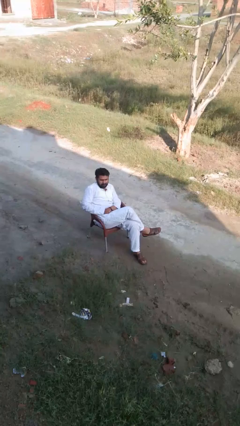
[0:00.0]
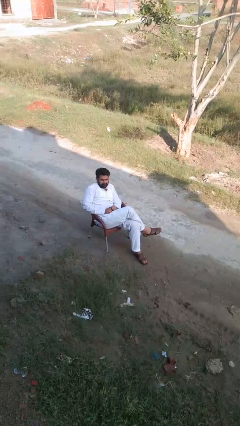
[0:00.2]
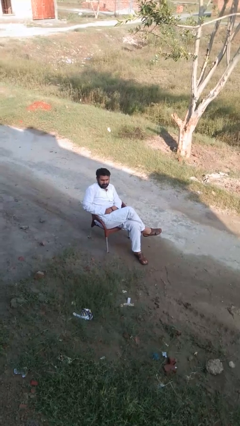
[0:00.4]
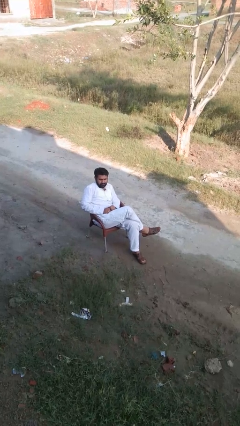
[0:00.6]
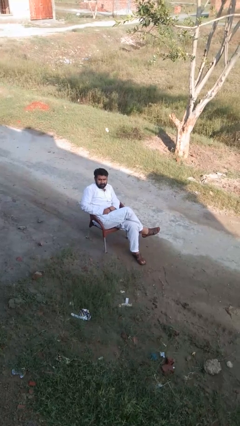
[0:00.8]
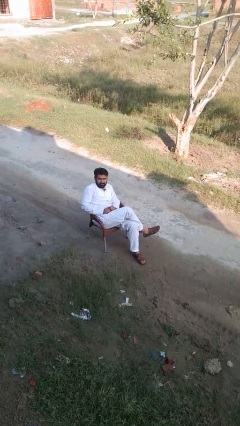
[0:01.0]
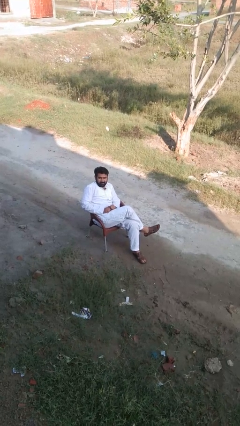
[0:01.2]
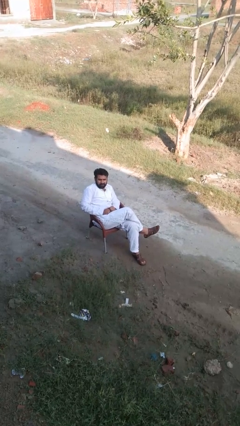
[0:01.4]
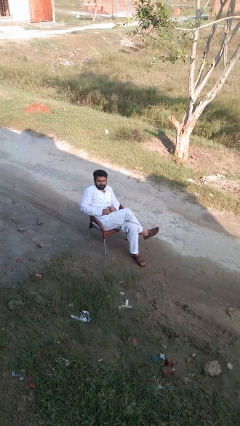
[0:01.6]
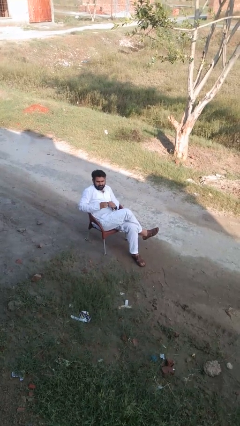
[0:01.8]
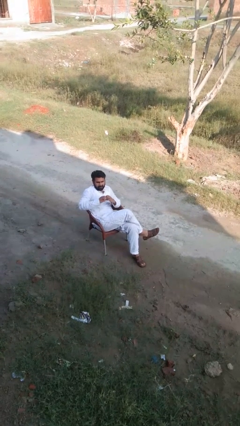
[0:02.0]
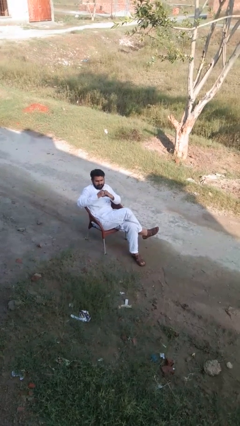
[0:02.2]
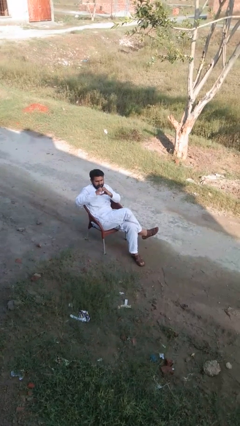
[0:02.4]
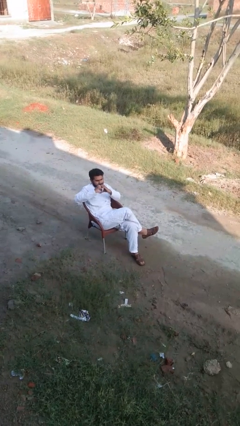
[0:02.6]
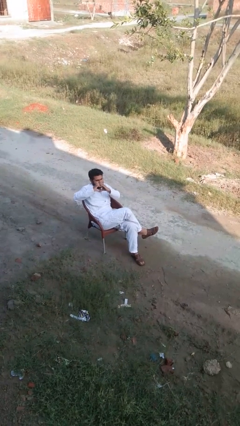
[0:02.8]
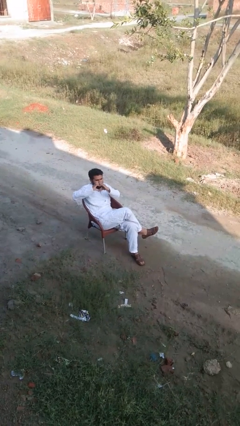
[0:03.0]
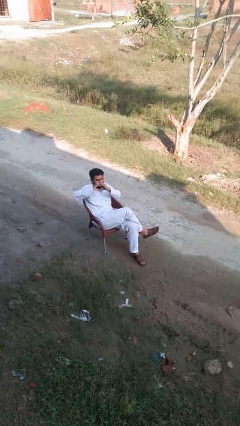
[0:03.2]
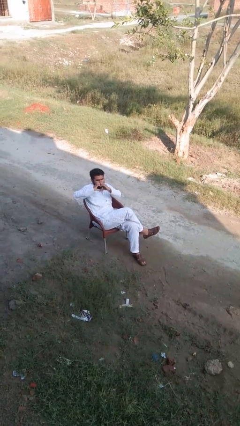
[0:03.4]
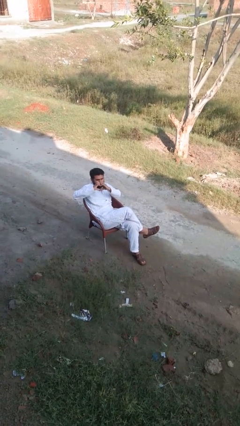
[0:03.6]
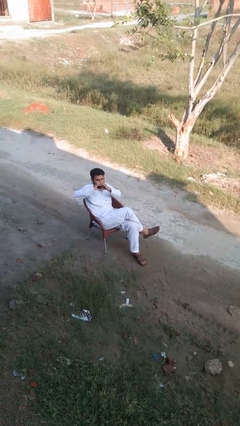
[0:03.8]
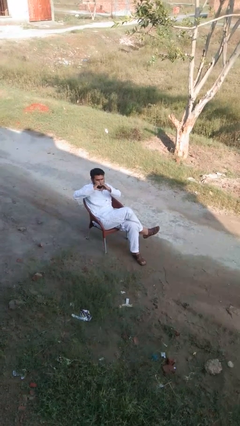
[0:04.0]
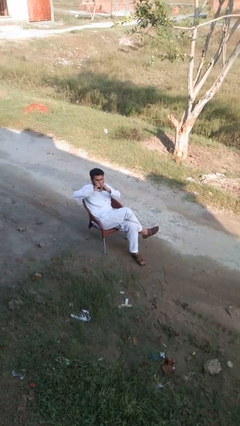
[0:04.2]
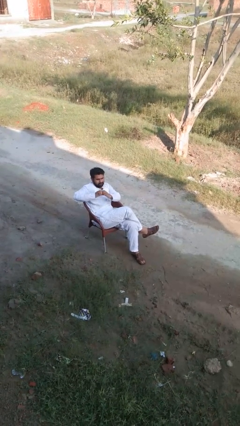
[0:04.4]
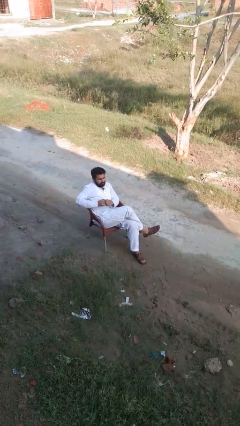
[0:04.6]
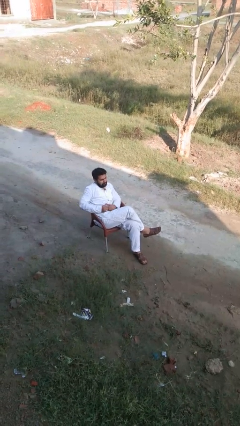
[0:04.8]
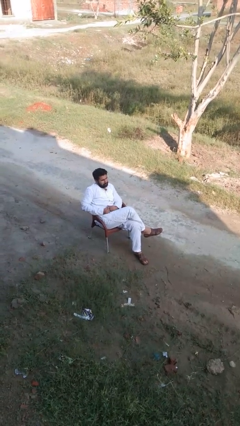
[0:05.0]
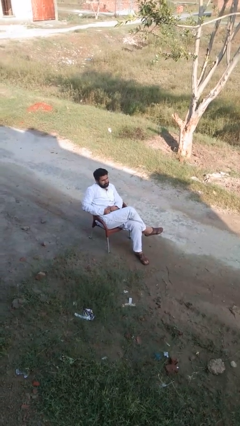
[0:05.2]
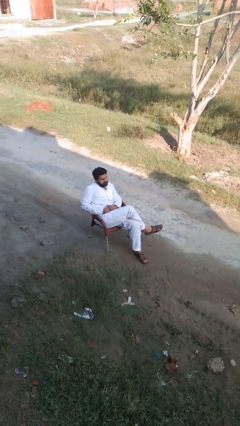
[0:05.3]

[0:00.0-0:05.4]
person gestures heart

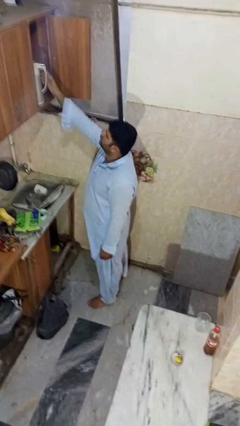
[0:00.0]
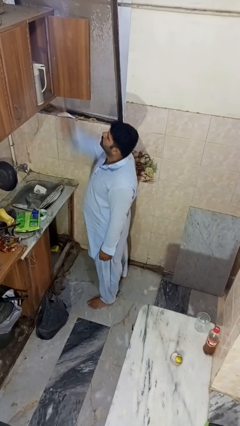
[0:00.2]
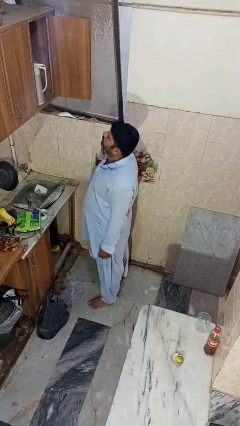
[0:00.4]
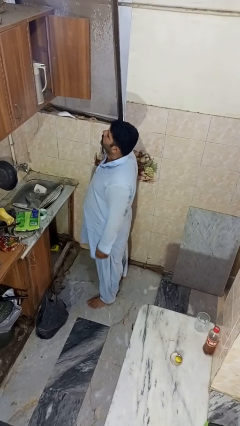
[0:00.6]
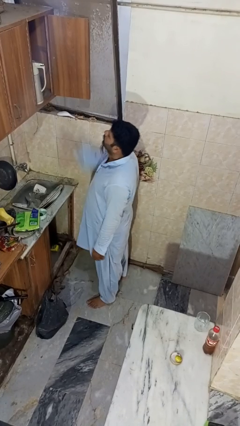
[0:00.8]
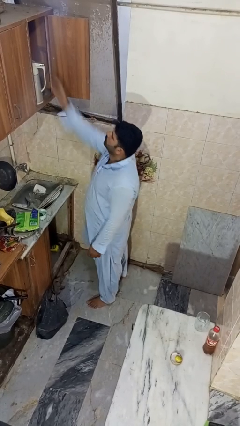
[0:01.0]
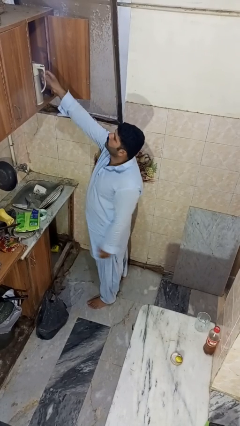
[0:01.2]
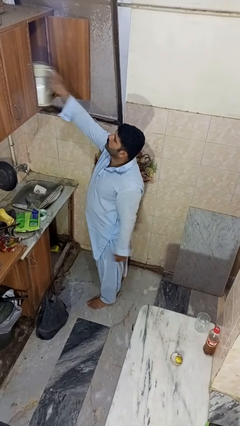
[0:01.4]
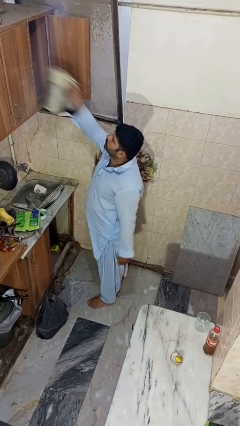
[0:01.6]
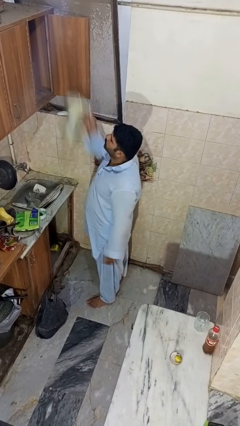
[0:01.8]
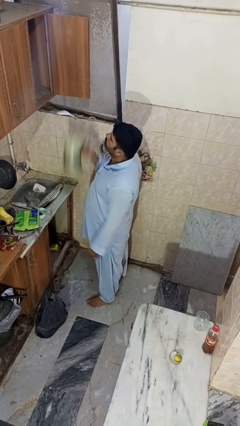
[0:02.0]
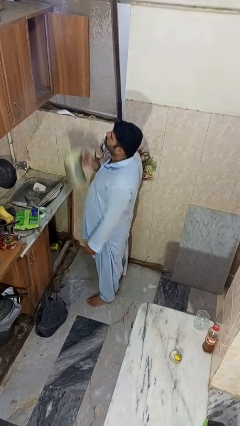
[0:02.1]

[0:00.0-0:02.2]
person takes object from cabinet

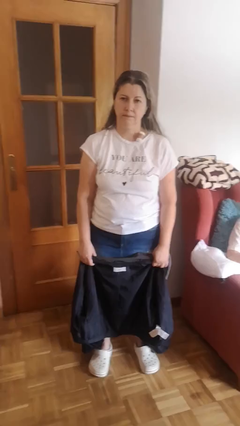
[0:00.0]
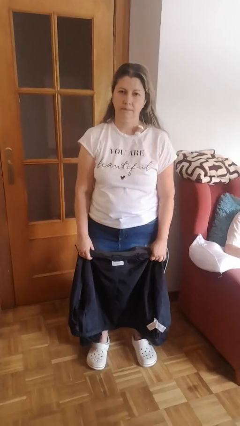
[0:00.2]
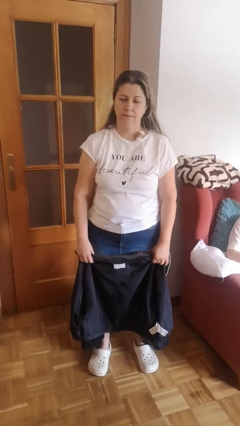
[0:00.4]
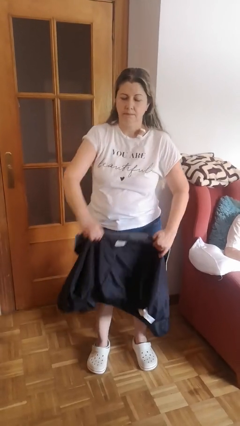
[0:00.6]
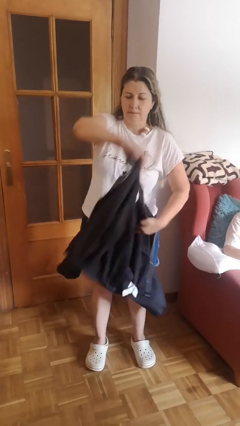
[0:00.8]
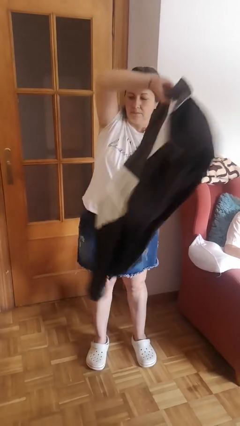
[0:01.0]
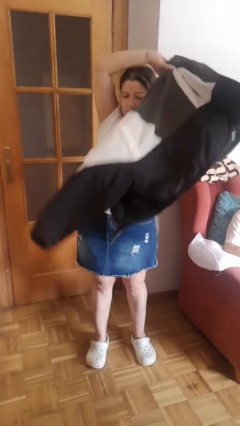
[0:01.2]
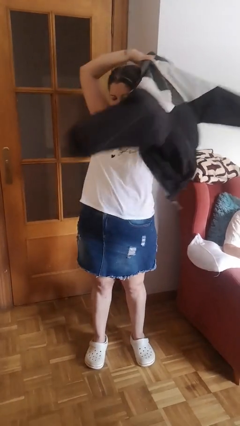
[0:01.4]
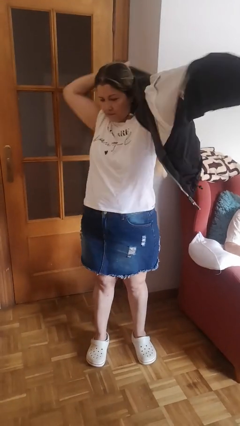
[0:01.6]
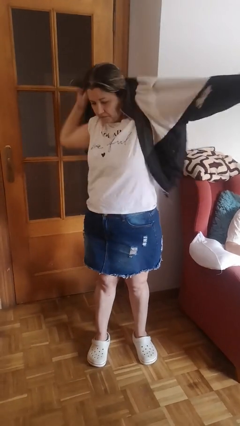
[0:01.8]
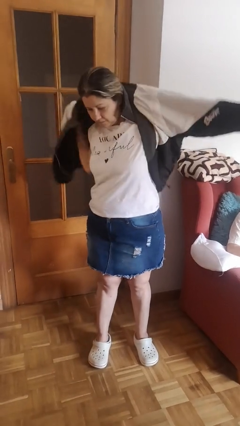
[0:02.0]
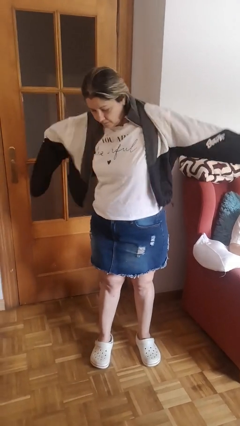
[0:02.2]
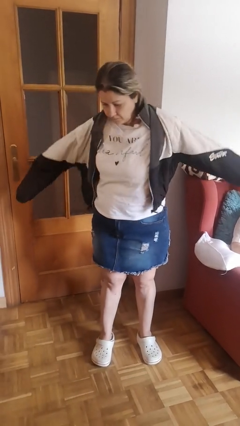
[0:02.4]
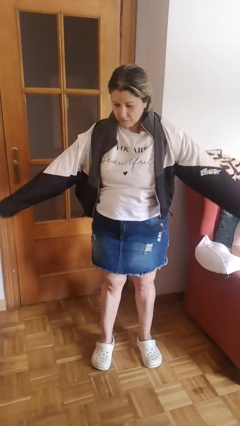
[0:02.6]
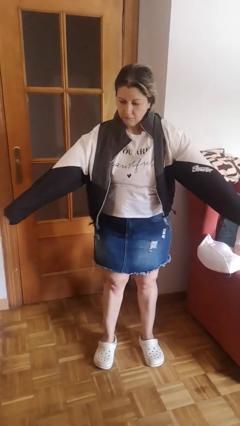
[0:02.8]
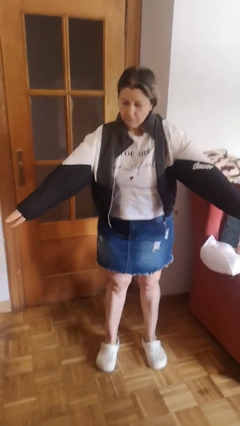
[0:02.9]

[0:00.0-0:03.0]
person puts on jacket

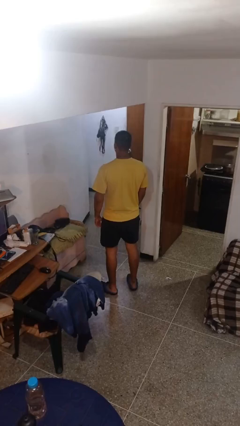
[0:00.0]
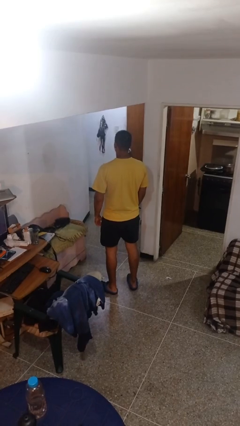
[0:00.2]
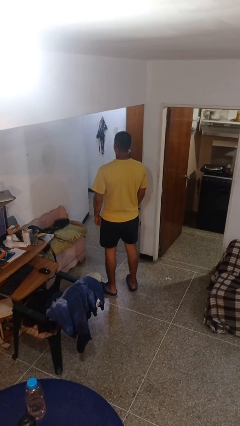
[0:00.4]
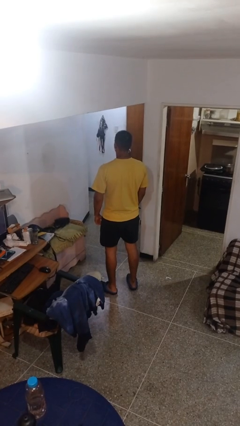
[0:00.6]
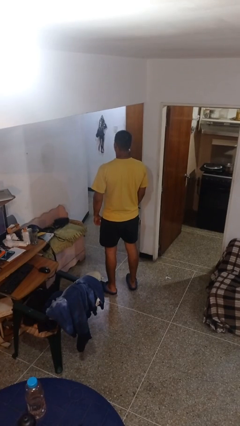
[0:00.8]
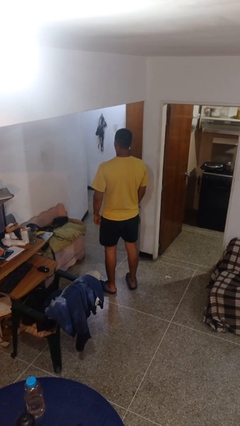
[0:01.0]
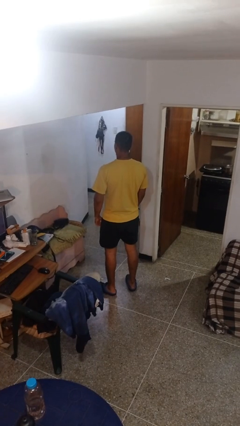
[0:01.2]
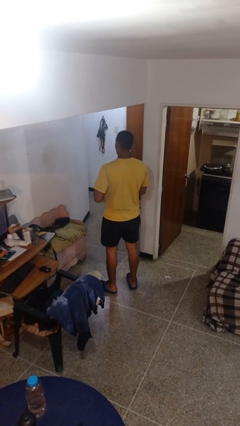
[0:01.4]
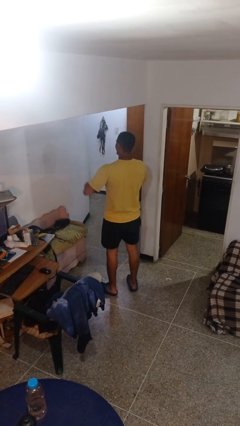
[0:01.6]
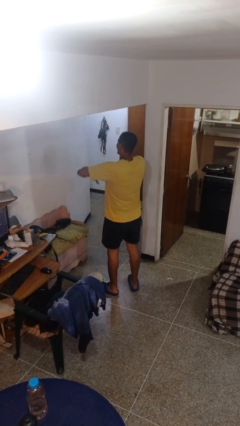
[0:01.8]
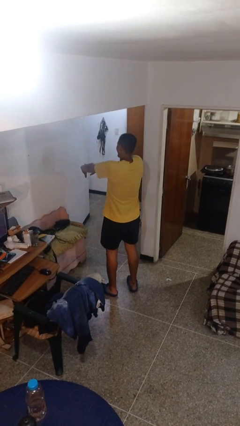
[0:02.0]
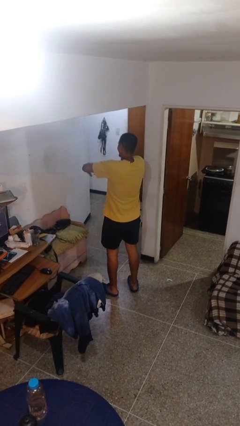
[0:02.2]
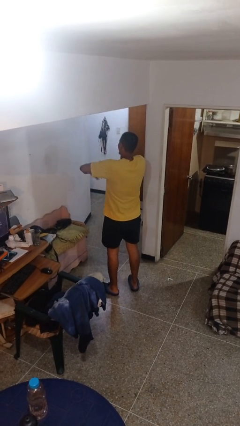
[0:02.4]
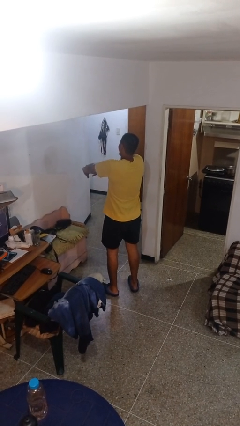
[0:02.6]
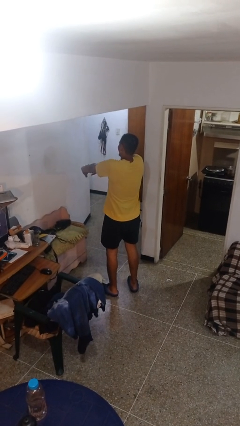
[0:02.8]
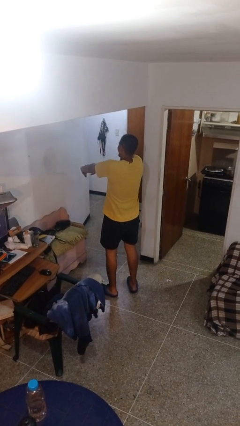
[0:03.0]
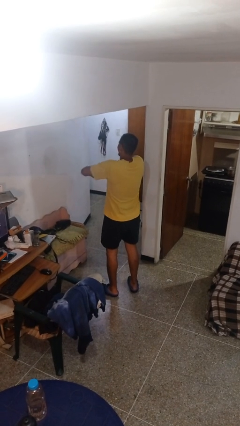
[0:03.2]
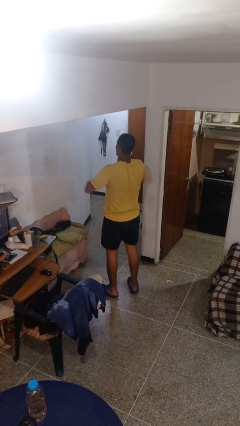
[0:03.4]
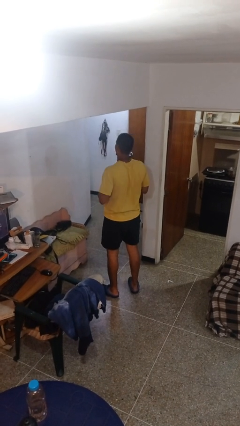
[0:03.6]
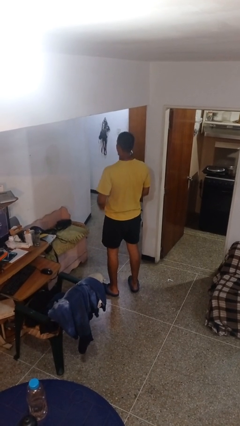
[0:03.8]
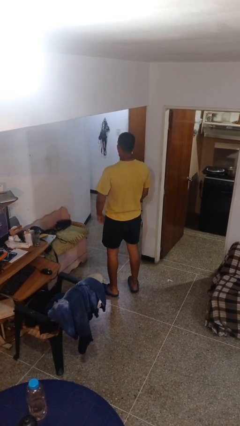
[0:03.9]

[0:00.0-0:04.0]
person cracks knuckles

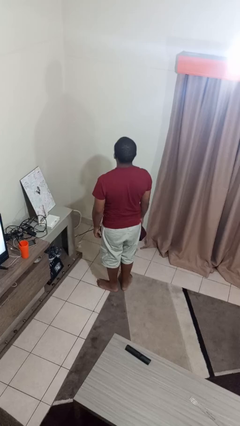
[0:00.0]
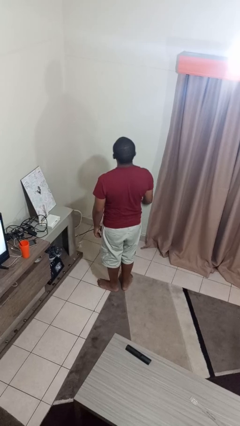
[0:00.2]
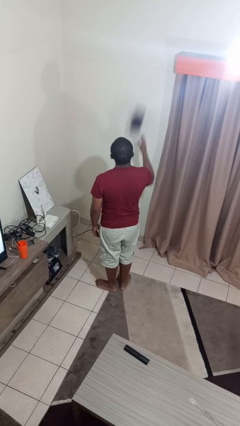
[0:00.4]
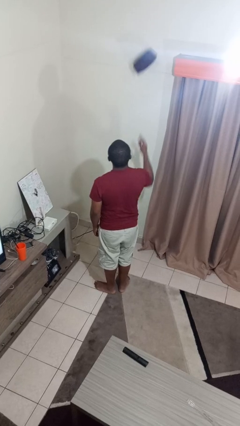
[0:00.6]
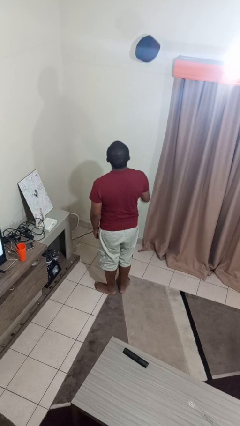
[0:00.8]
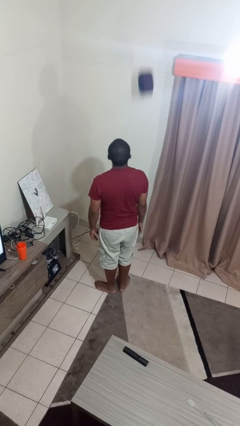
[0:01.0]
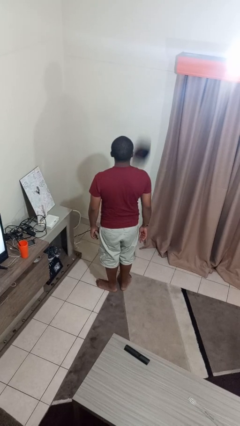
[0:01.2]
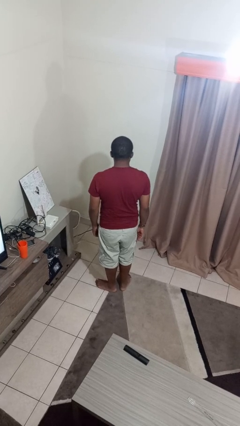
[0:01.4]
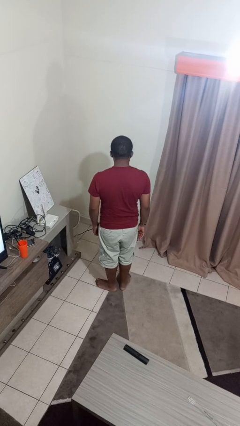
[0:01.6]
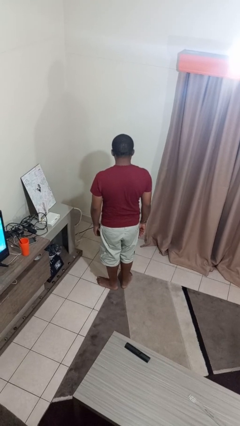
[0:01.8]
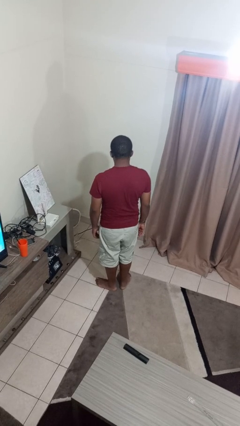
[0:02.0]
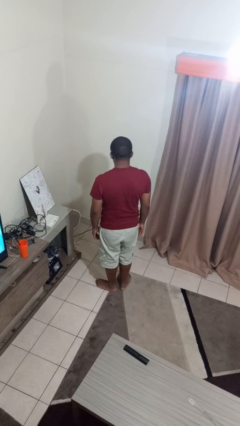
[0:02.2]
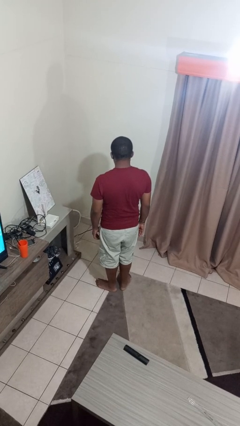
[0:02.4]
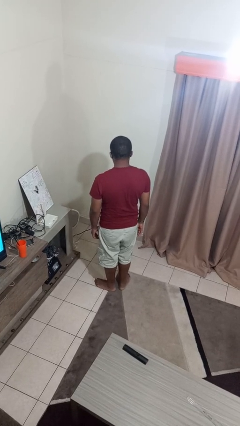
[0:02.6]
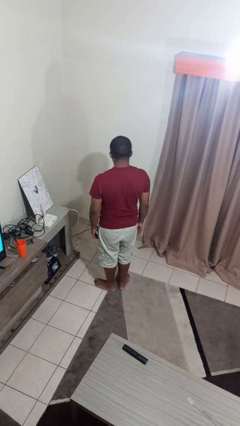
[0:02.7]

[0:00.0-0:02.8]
person throws object into air
